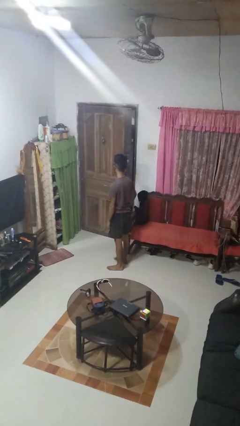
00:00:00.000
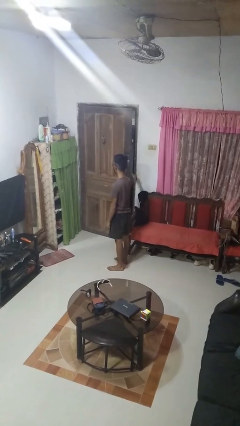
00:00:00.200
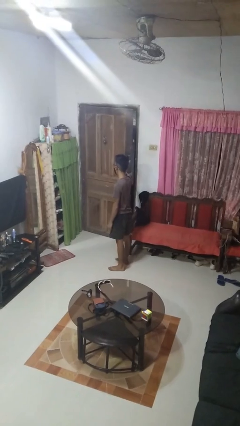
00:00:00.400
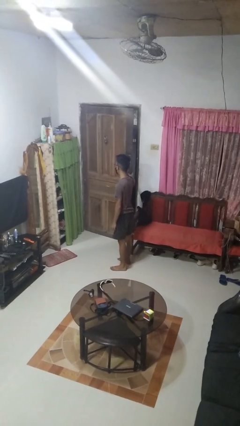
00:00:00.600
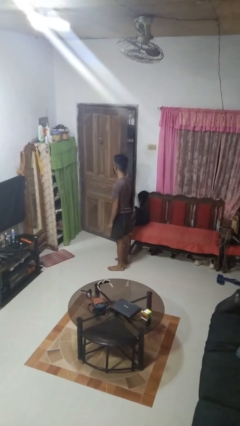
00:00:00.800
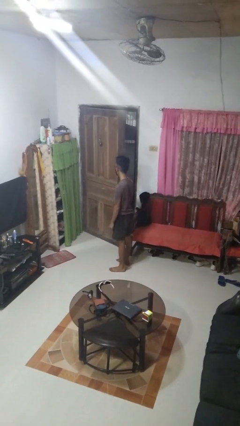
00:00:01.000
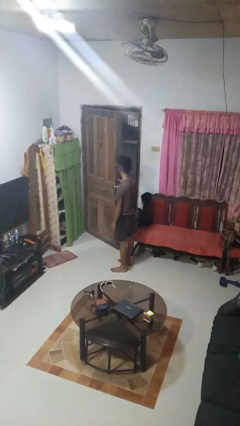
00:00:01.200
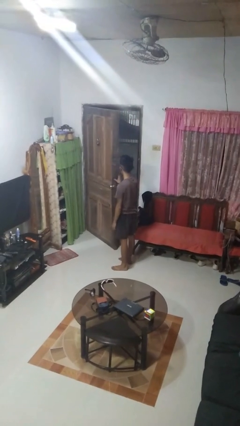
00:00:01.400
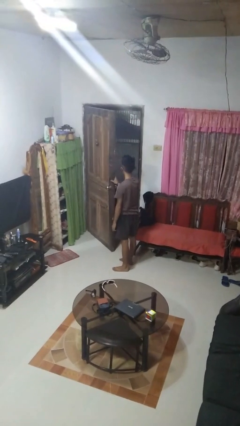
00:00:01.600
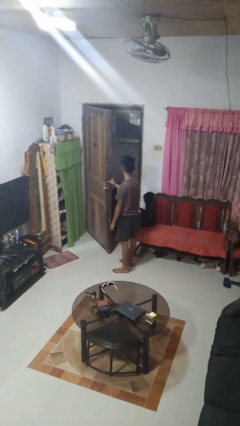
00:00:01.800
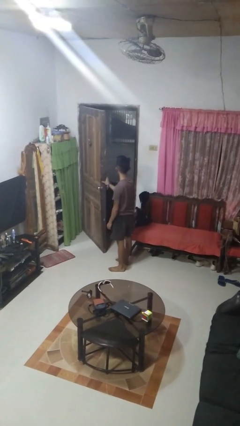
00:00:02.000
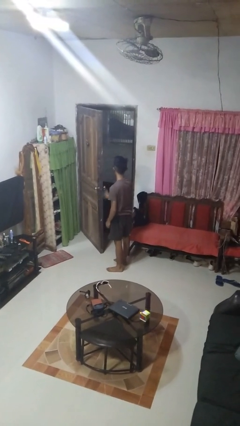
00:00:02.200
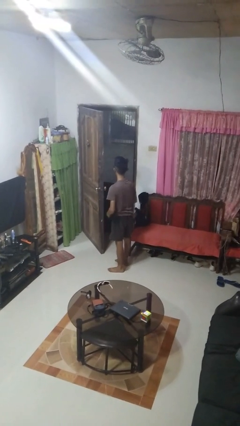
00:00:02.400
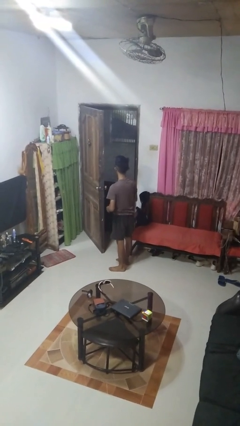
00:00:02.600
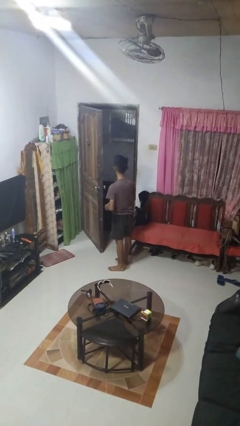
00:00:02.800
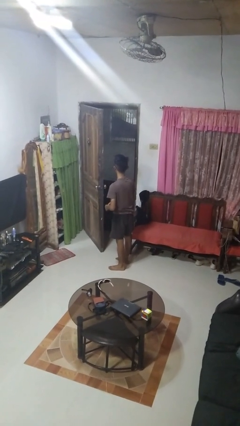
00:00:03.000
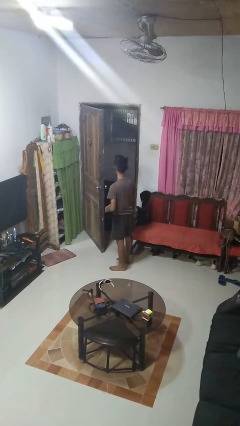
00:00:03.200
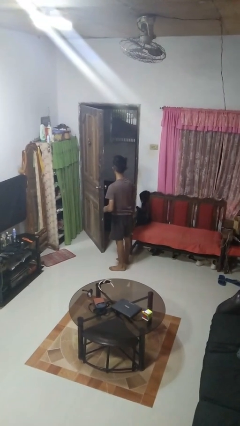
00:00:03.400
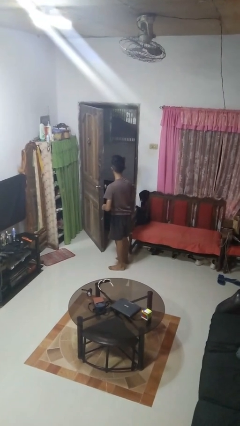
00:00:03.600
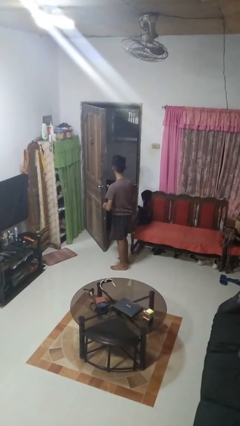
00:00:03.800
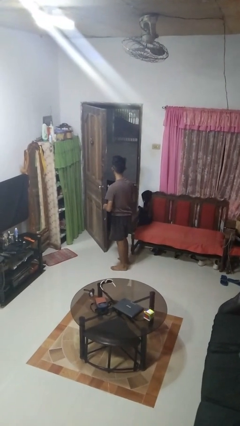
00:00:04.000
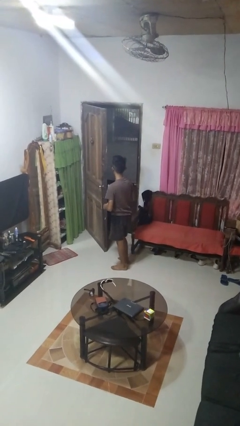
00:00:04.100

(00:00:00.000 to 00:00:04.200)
person opens facility door

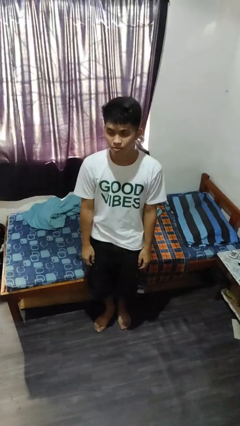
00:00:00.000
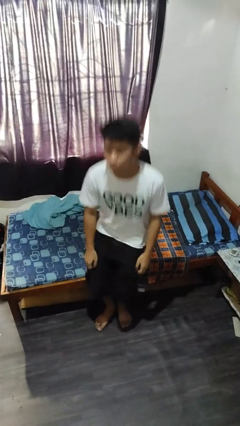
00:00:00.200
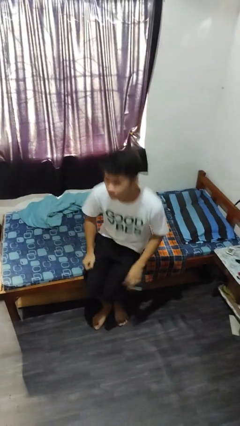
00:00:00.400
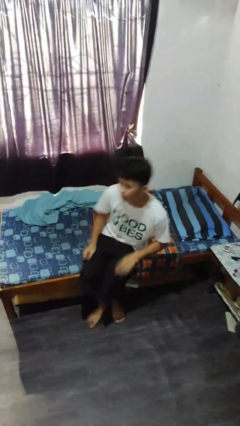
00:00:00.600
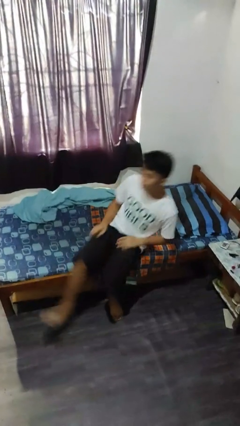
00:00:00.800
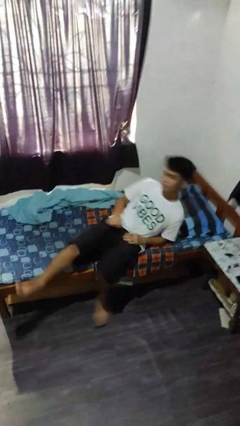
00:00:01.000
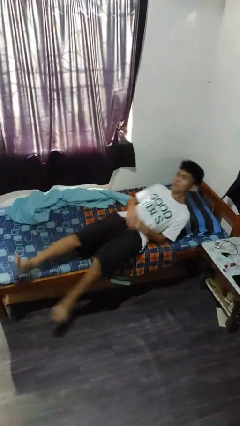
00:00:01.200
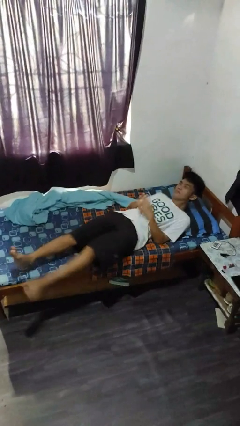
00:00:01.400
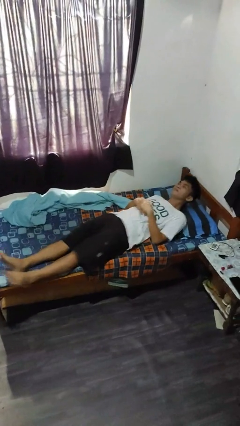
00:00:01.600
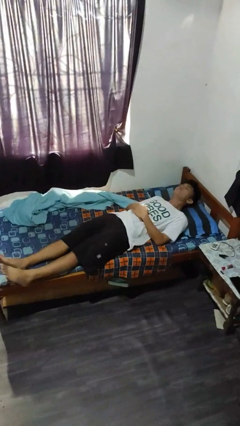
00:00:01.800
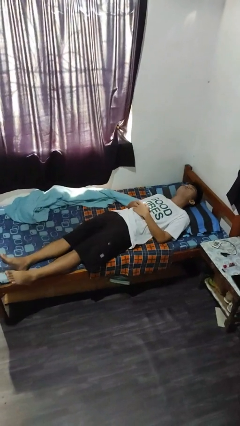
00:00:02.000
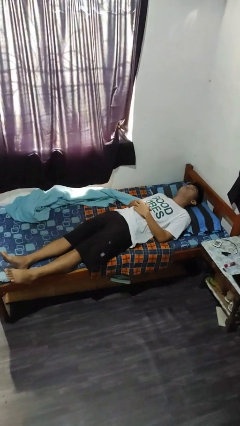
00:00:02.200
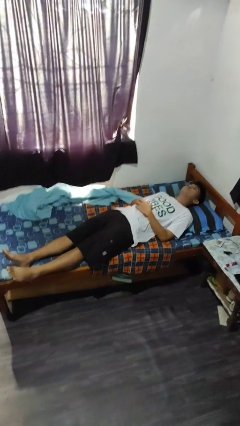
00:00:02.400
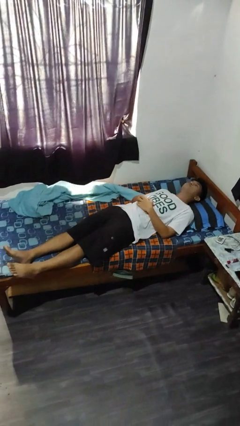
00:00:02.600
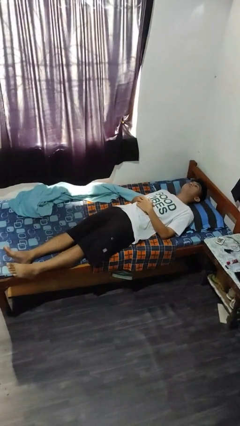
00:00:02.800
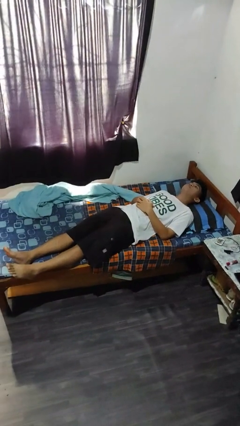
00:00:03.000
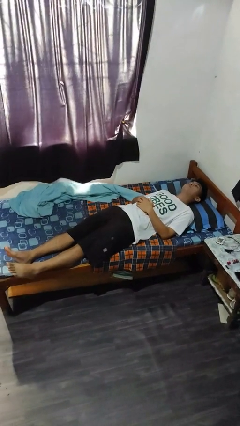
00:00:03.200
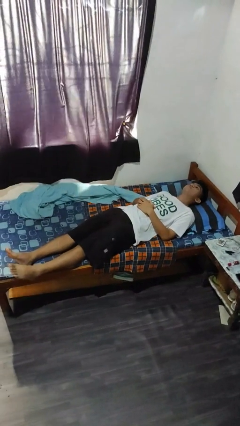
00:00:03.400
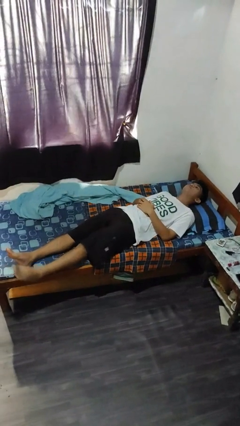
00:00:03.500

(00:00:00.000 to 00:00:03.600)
person lies down on bed

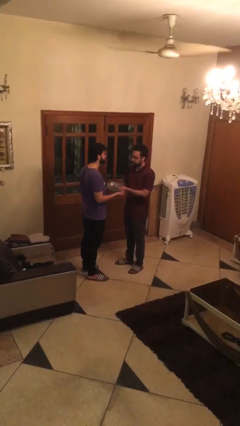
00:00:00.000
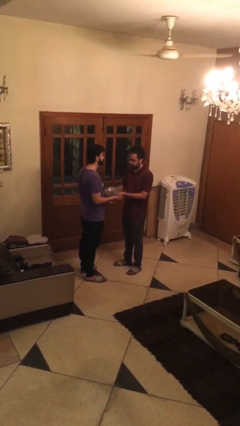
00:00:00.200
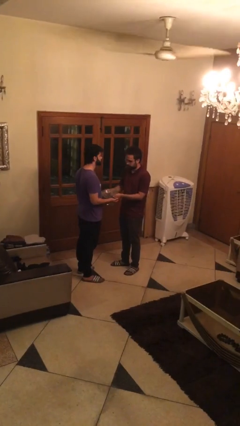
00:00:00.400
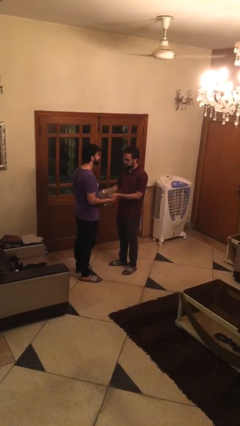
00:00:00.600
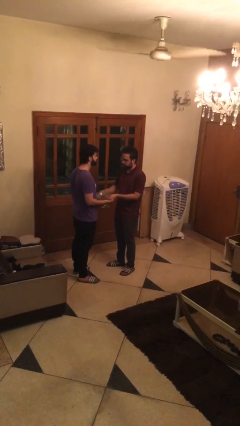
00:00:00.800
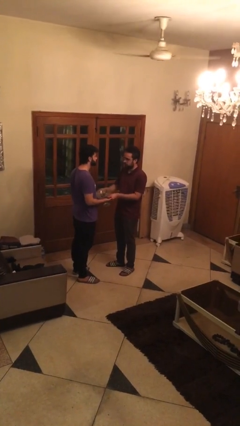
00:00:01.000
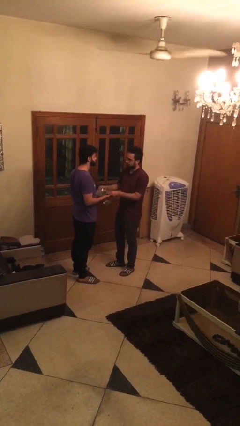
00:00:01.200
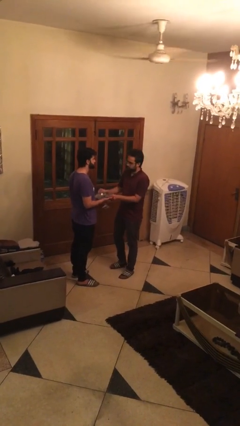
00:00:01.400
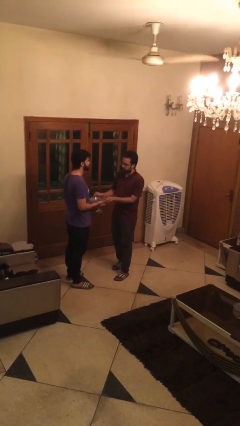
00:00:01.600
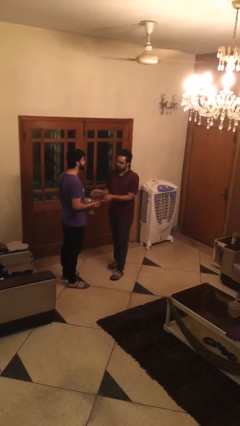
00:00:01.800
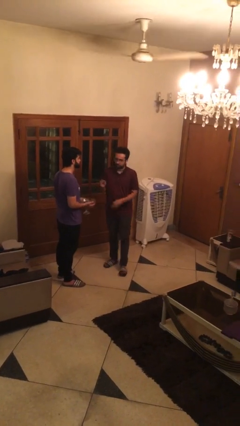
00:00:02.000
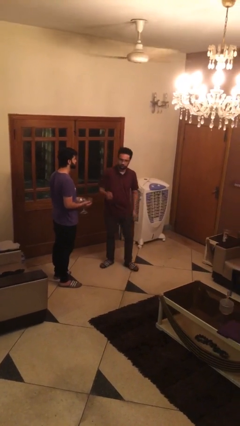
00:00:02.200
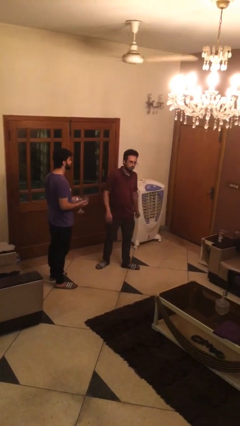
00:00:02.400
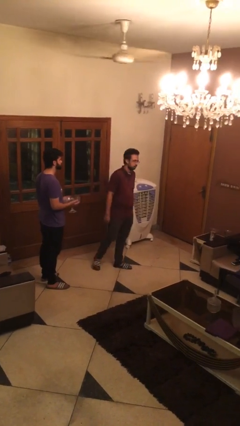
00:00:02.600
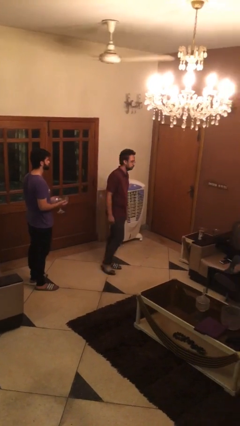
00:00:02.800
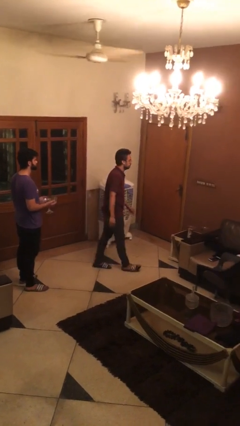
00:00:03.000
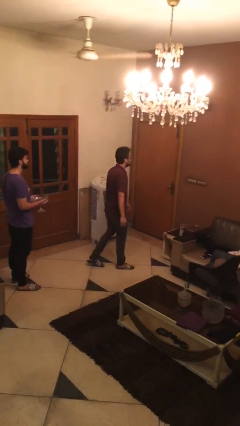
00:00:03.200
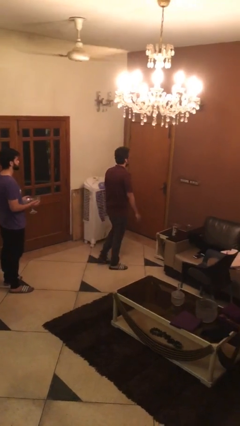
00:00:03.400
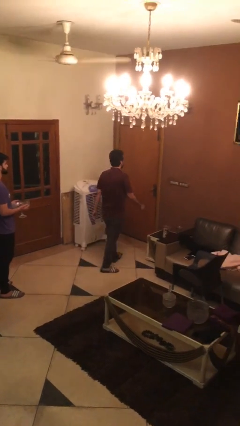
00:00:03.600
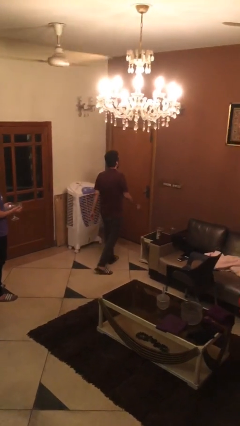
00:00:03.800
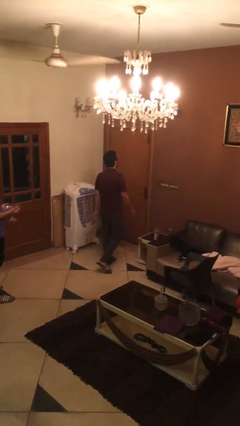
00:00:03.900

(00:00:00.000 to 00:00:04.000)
person transfers object to person

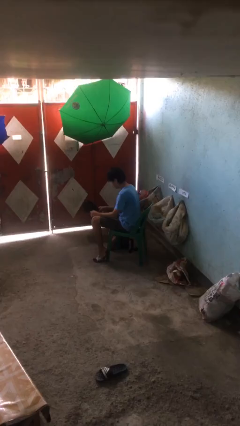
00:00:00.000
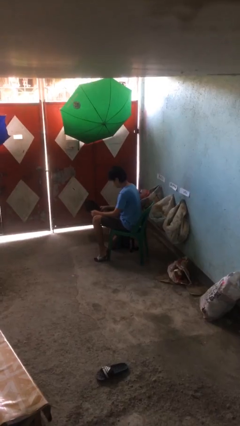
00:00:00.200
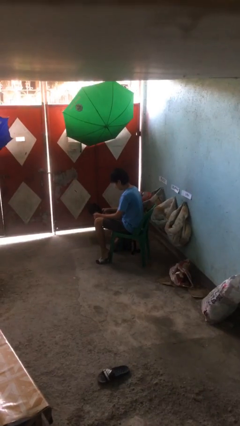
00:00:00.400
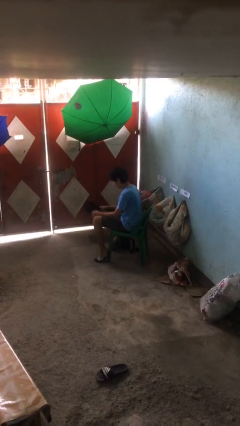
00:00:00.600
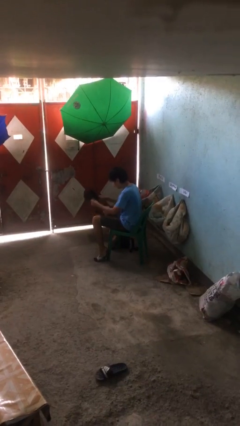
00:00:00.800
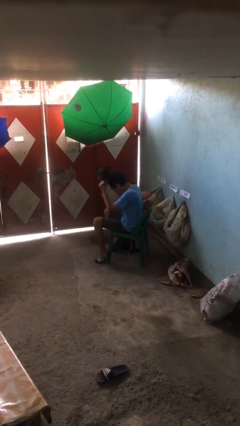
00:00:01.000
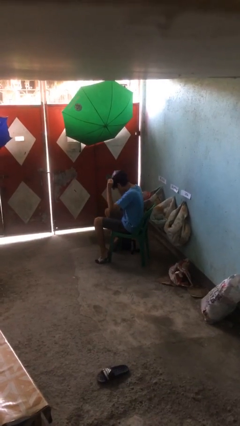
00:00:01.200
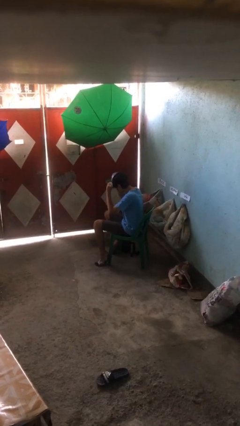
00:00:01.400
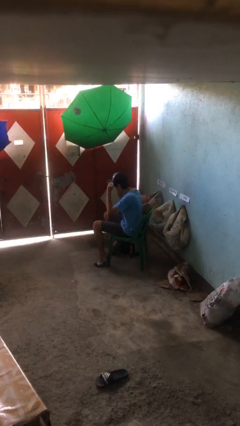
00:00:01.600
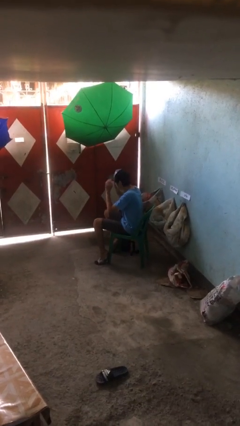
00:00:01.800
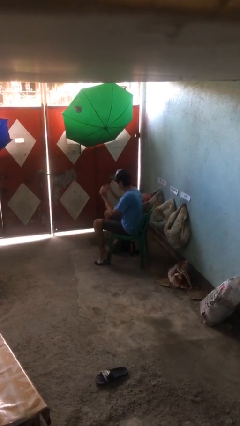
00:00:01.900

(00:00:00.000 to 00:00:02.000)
person puts on hat

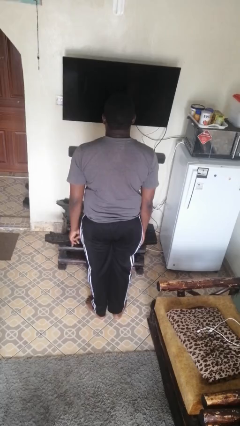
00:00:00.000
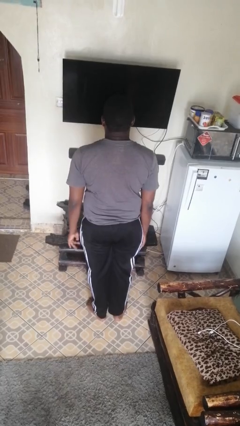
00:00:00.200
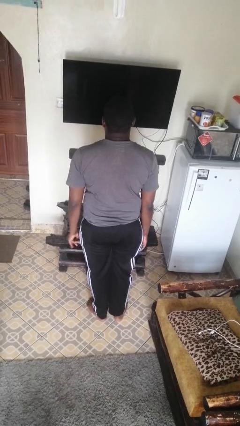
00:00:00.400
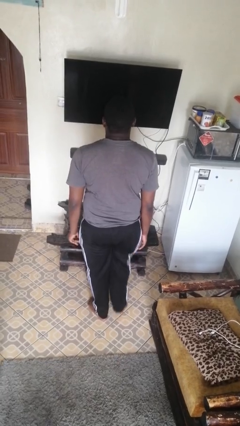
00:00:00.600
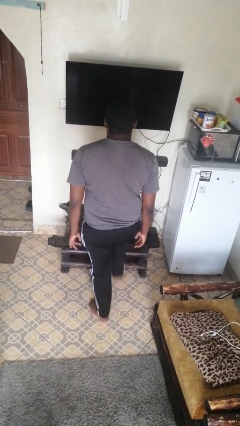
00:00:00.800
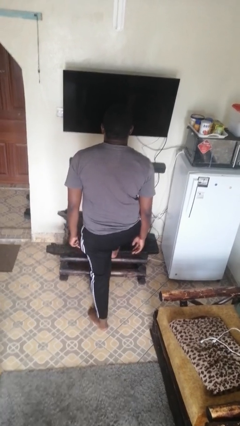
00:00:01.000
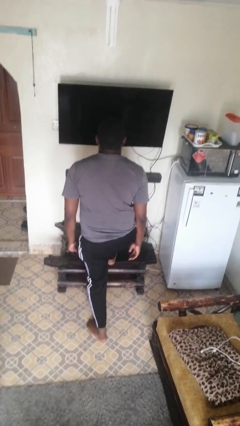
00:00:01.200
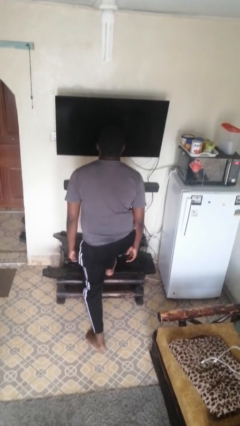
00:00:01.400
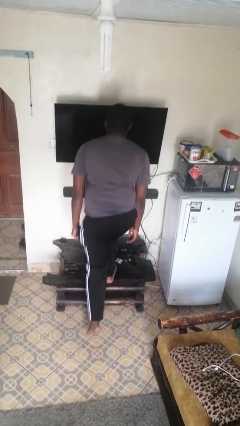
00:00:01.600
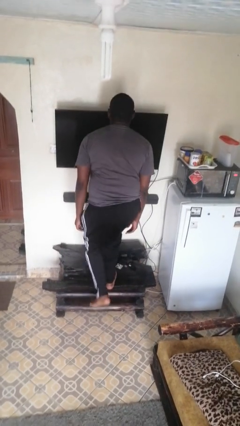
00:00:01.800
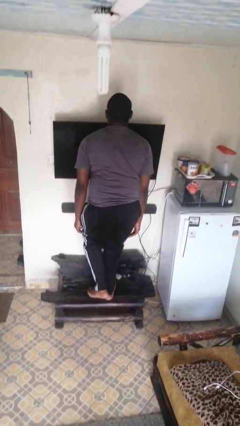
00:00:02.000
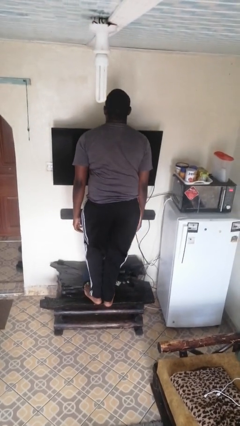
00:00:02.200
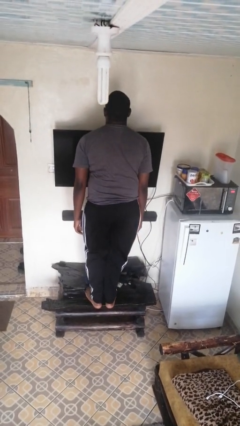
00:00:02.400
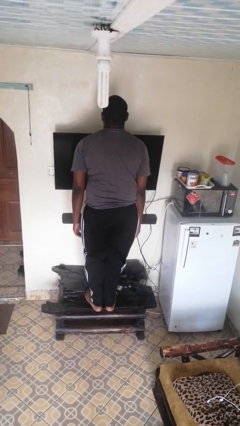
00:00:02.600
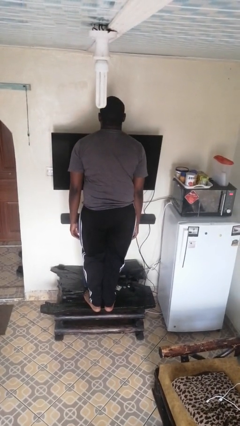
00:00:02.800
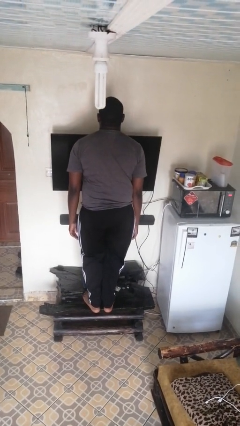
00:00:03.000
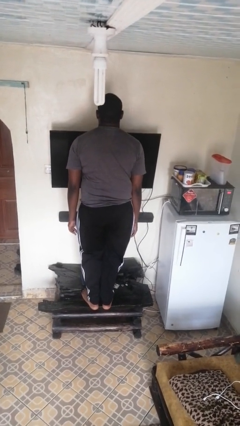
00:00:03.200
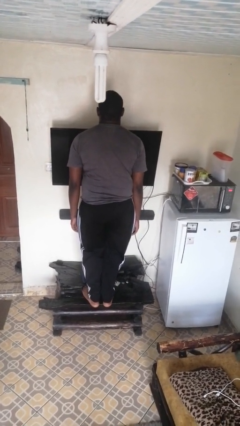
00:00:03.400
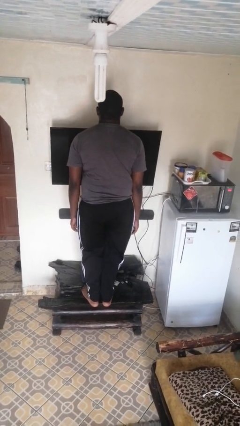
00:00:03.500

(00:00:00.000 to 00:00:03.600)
person climbs on table

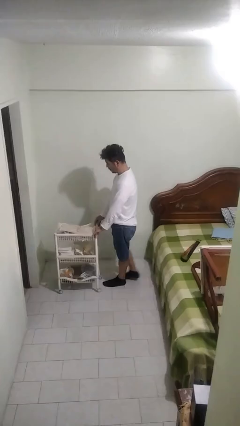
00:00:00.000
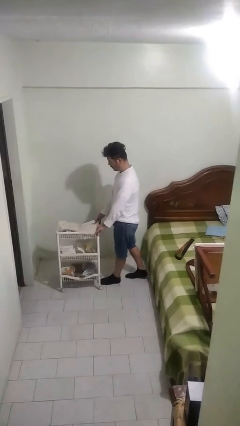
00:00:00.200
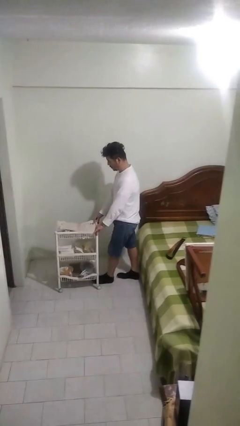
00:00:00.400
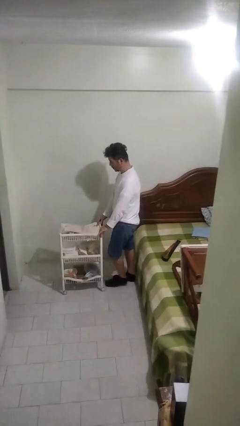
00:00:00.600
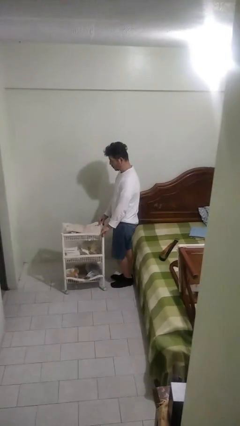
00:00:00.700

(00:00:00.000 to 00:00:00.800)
person pulls wheeled cart
